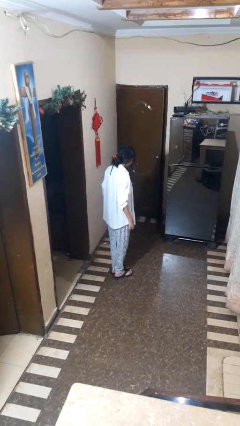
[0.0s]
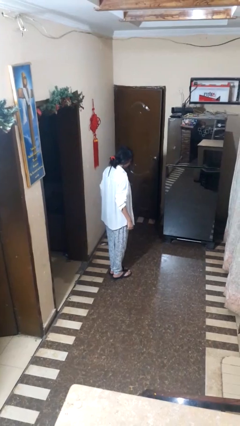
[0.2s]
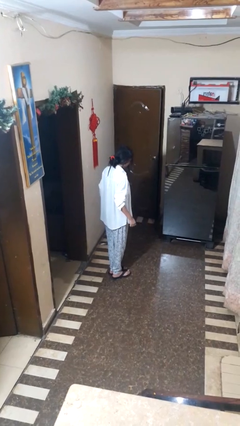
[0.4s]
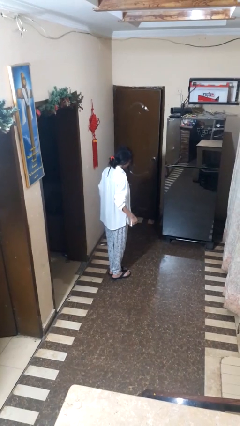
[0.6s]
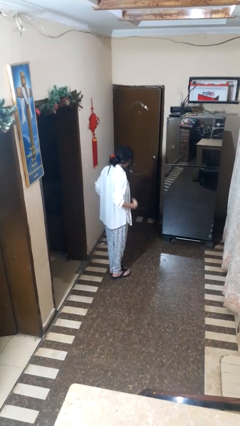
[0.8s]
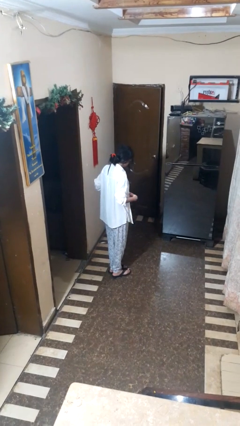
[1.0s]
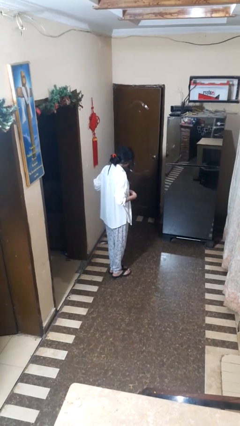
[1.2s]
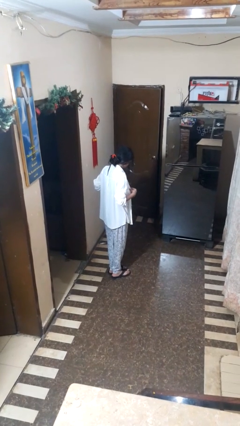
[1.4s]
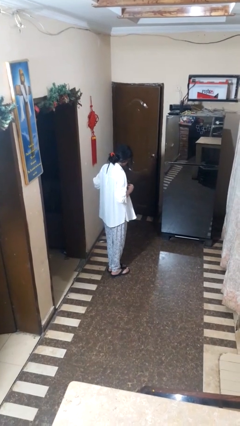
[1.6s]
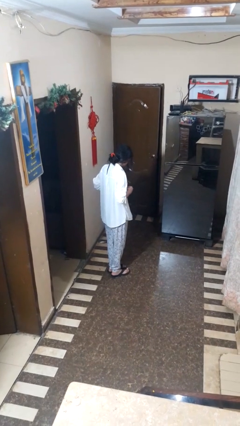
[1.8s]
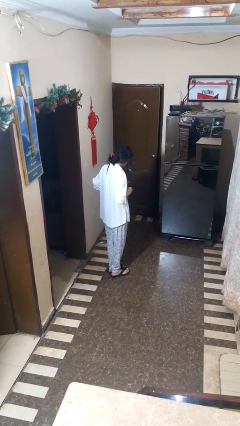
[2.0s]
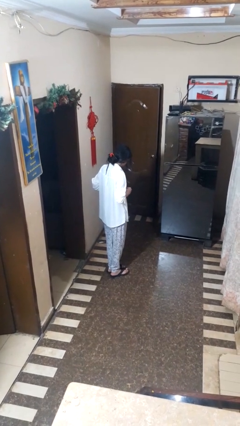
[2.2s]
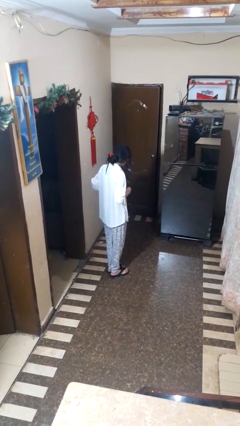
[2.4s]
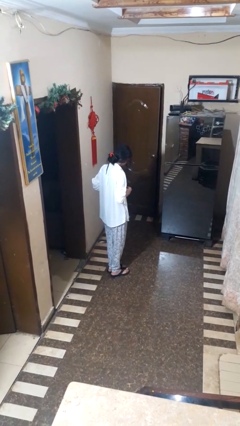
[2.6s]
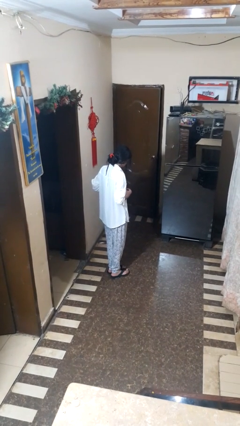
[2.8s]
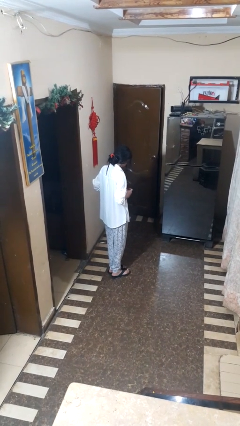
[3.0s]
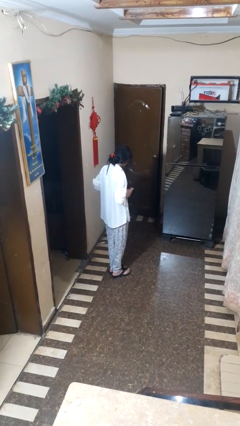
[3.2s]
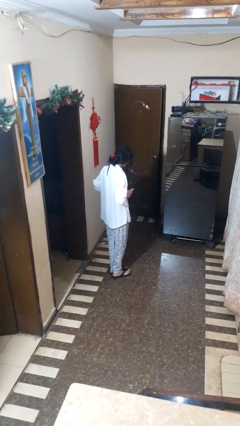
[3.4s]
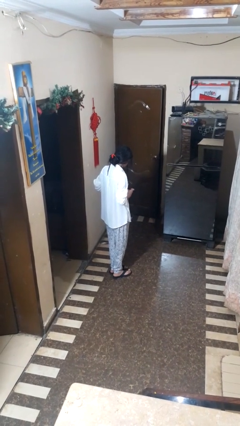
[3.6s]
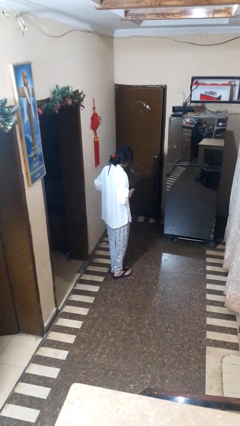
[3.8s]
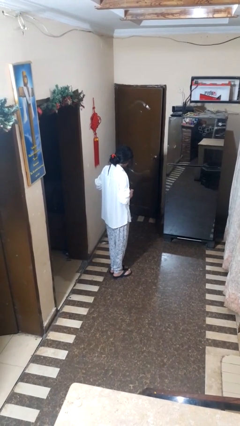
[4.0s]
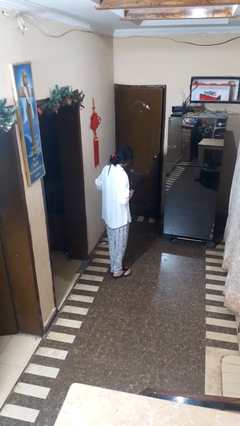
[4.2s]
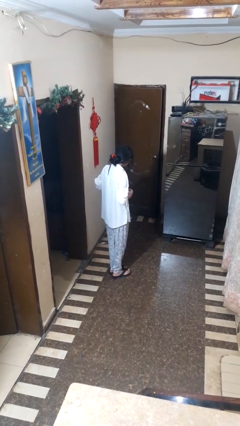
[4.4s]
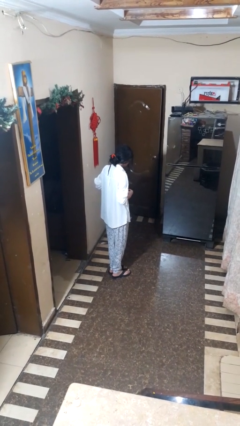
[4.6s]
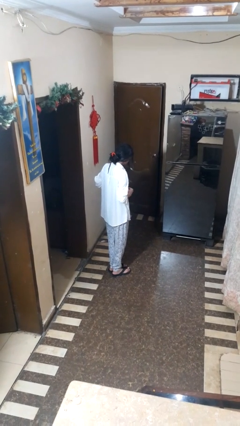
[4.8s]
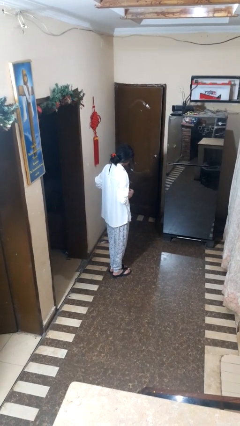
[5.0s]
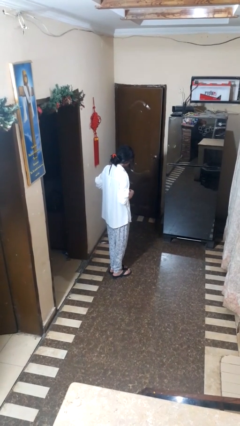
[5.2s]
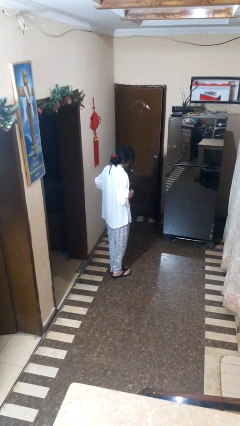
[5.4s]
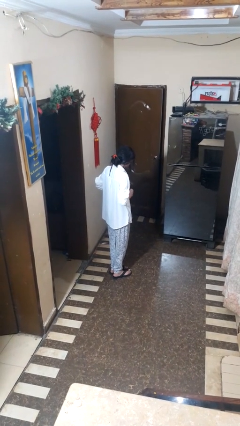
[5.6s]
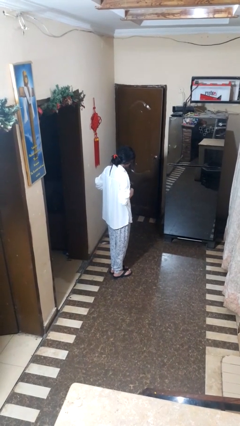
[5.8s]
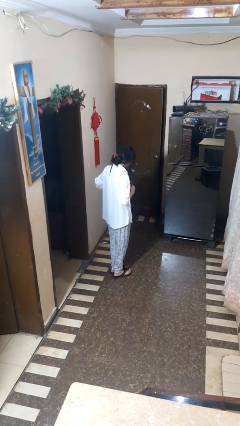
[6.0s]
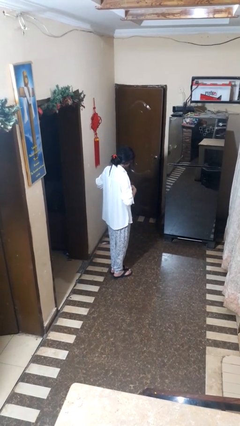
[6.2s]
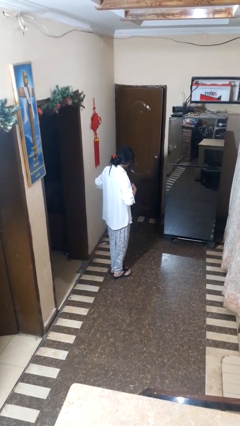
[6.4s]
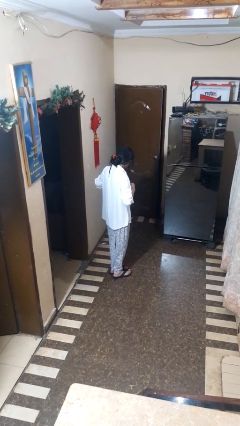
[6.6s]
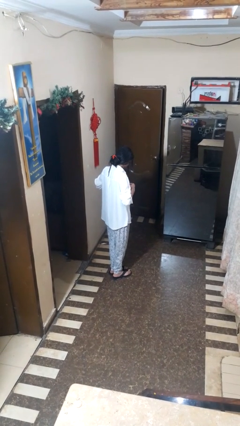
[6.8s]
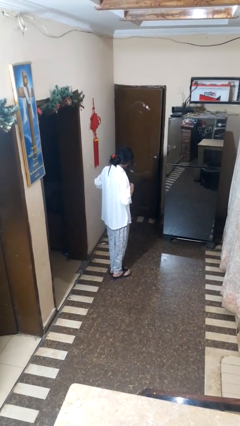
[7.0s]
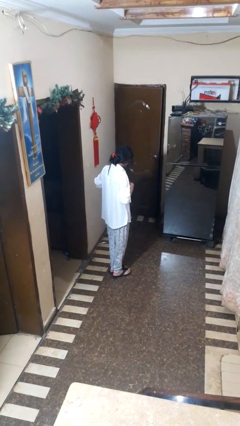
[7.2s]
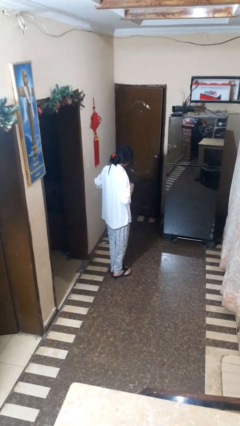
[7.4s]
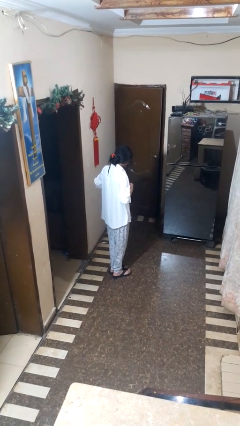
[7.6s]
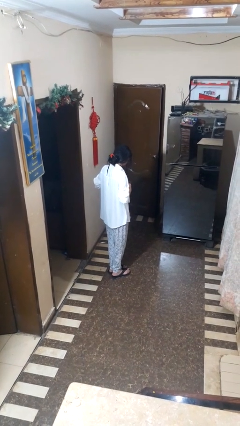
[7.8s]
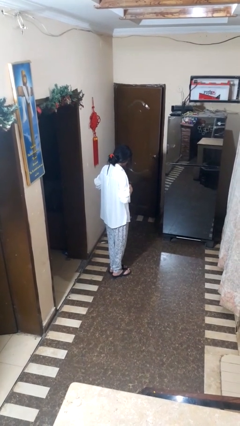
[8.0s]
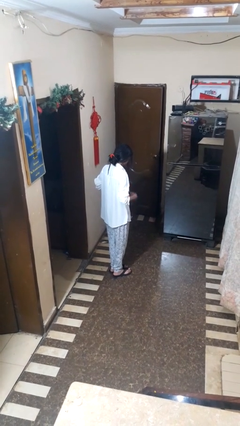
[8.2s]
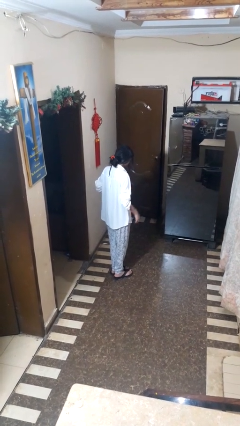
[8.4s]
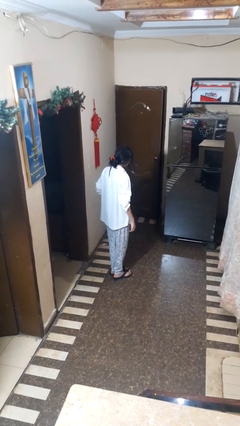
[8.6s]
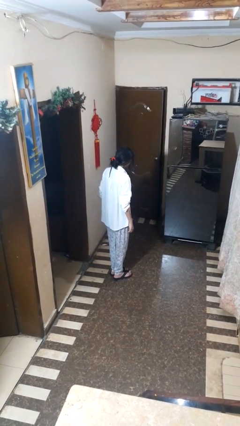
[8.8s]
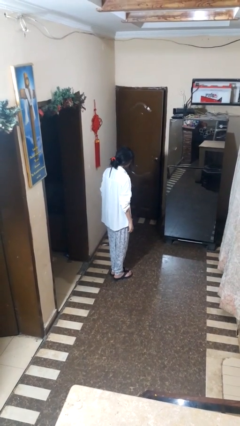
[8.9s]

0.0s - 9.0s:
person buttons shirt

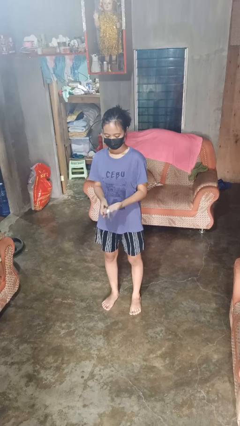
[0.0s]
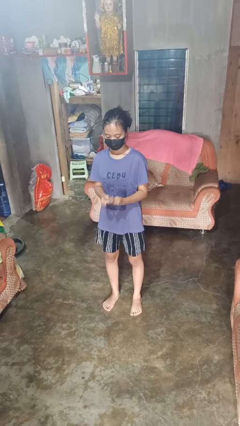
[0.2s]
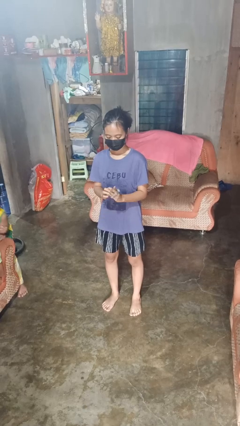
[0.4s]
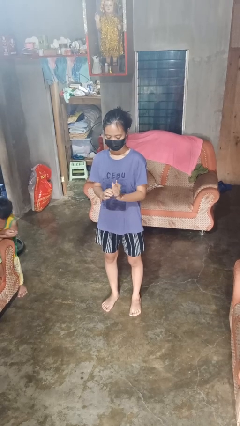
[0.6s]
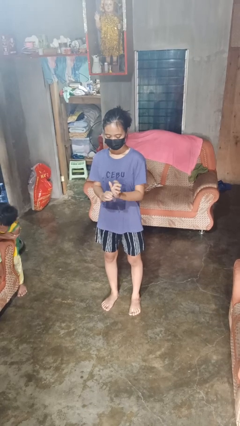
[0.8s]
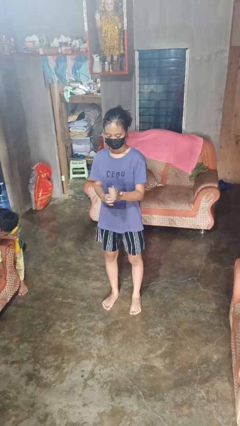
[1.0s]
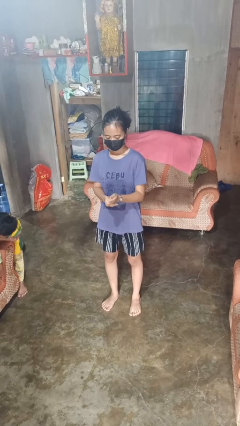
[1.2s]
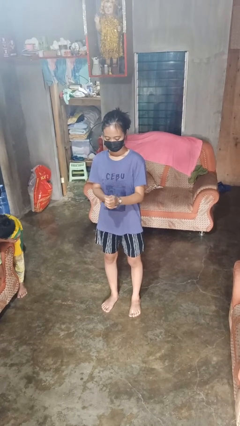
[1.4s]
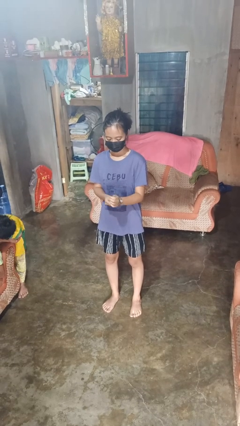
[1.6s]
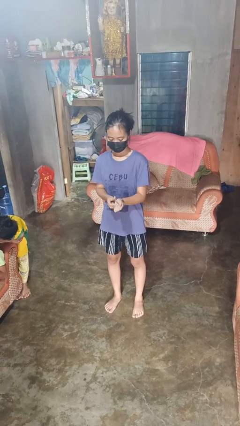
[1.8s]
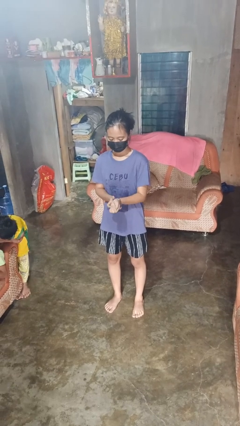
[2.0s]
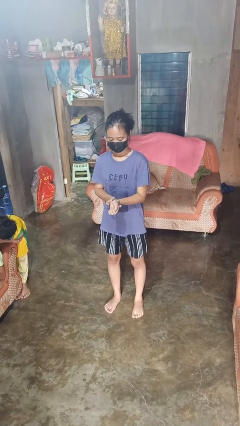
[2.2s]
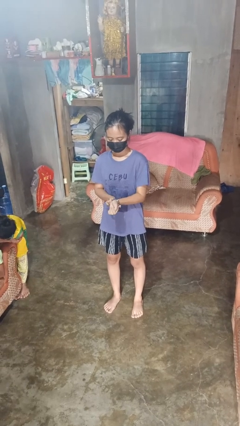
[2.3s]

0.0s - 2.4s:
person puts on wristwatch

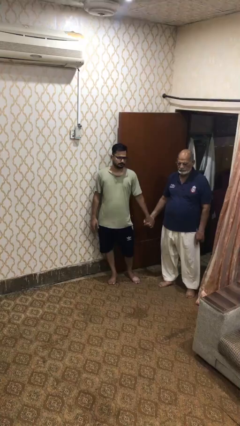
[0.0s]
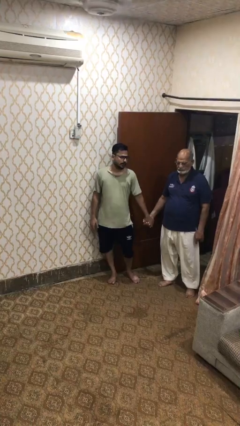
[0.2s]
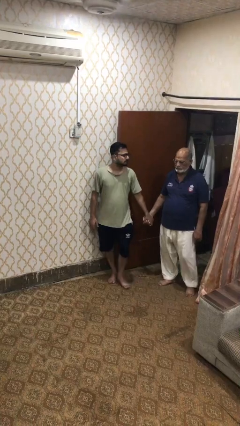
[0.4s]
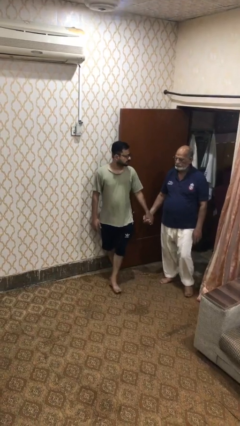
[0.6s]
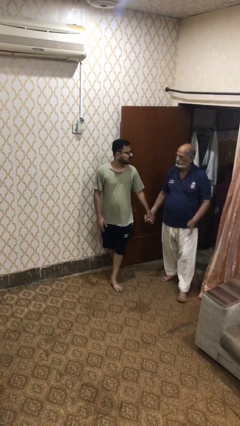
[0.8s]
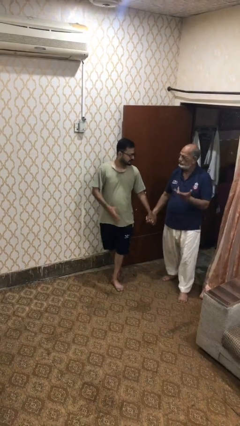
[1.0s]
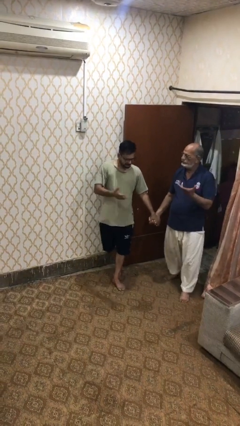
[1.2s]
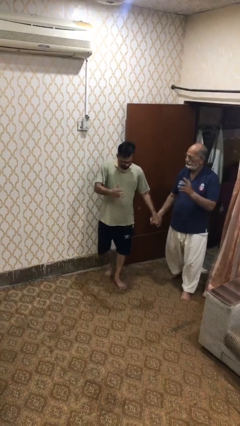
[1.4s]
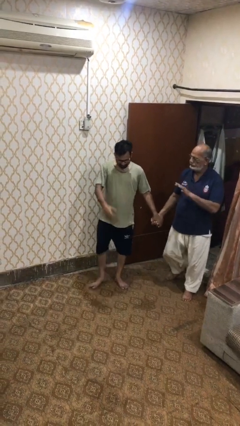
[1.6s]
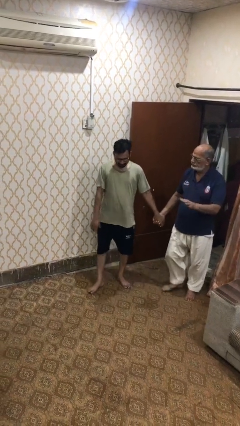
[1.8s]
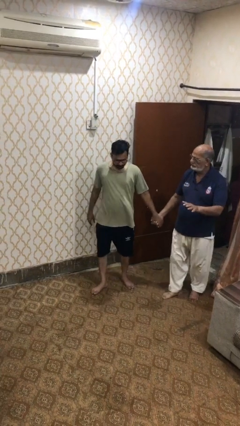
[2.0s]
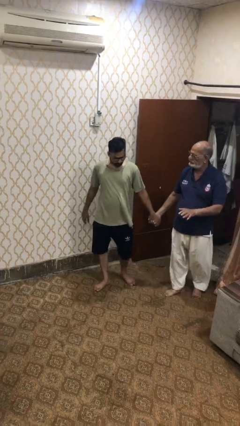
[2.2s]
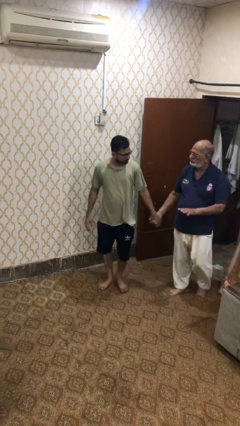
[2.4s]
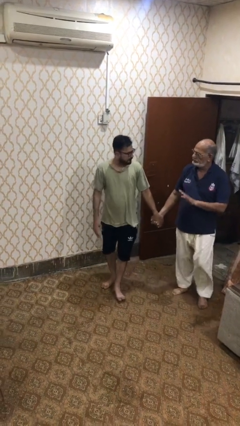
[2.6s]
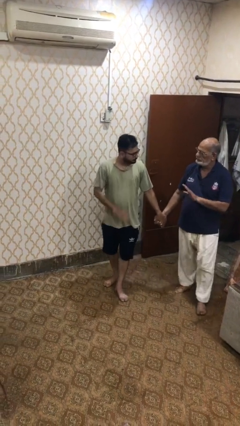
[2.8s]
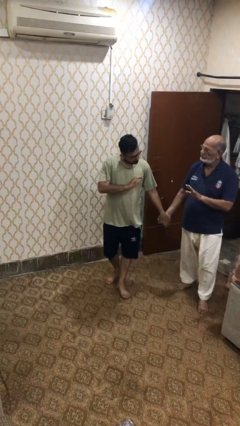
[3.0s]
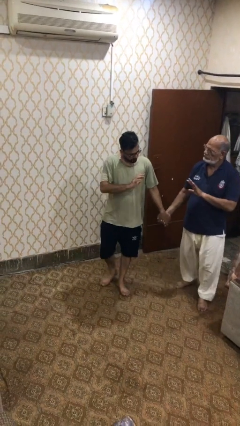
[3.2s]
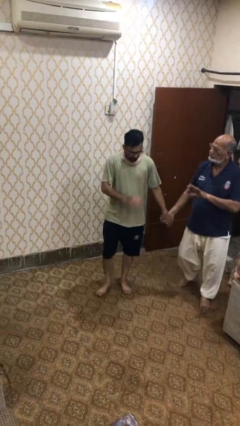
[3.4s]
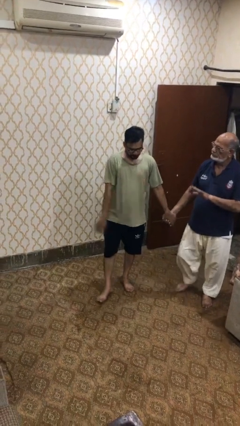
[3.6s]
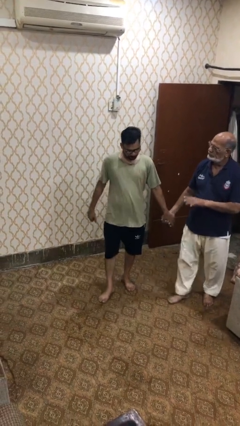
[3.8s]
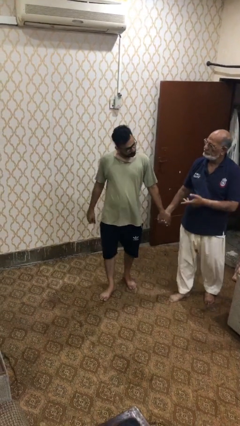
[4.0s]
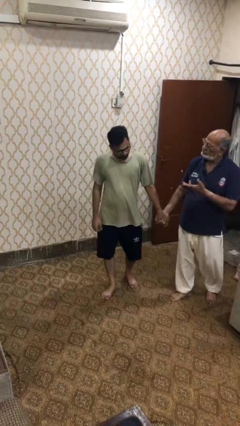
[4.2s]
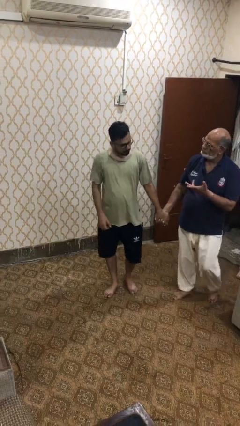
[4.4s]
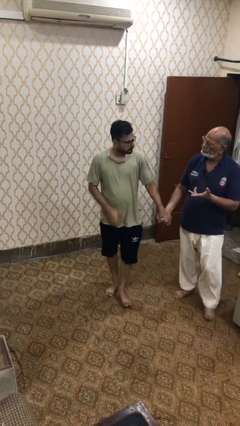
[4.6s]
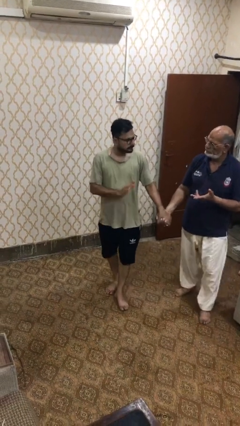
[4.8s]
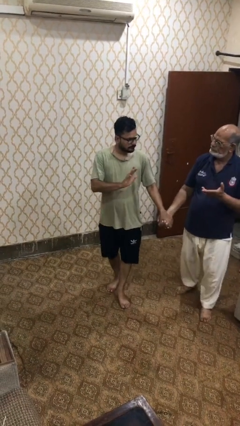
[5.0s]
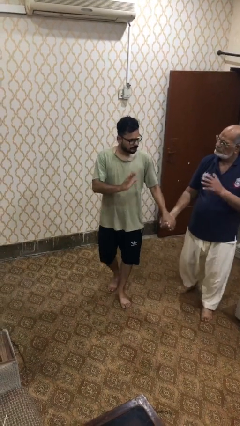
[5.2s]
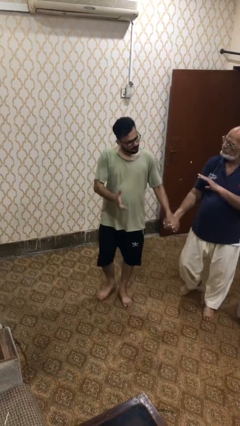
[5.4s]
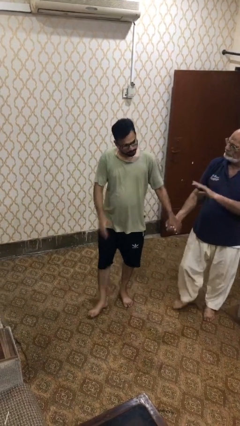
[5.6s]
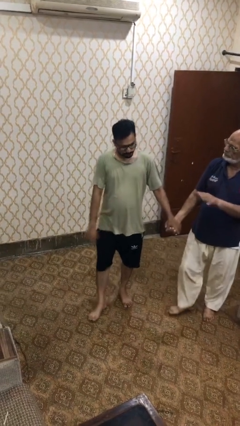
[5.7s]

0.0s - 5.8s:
person holds hand

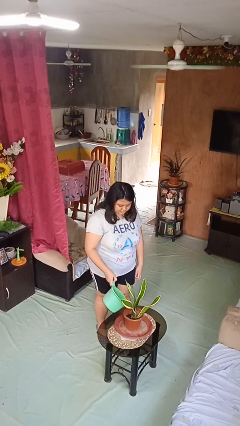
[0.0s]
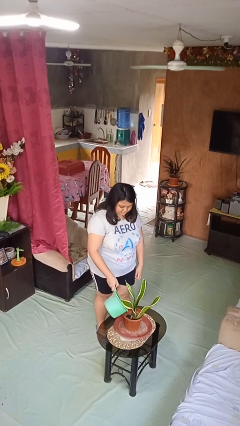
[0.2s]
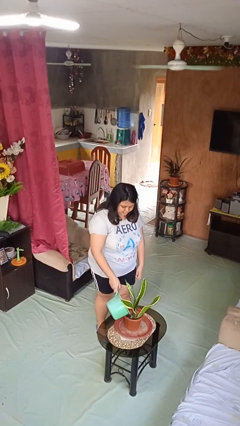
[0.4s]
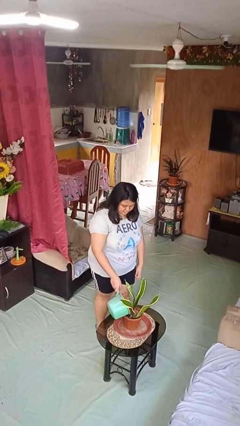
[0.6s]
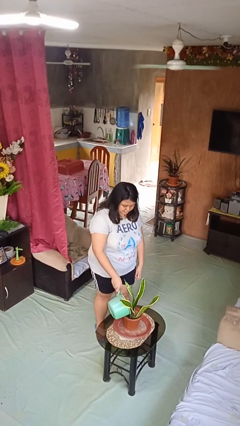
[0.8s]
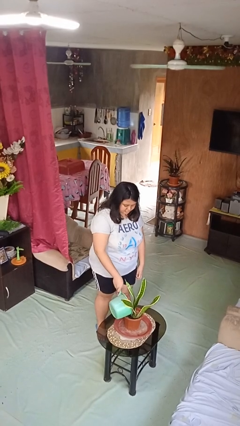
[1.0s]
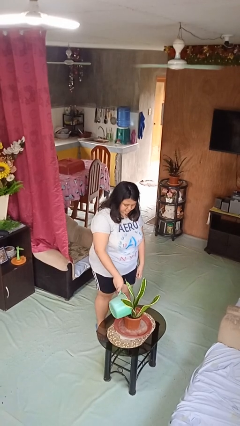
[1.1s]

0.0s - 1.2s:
person waters houseplant
